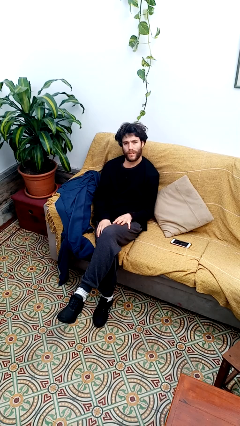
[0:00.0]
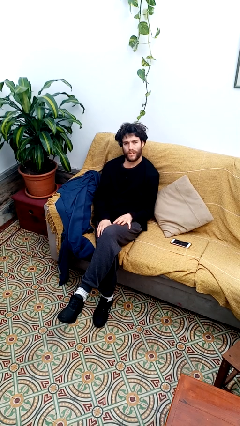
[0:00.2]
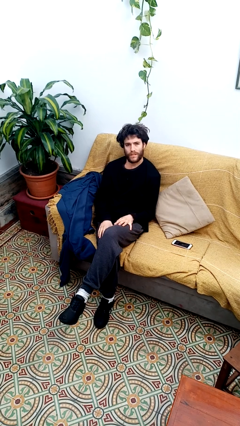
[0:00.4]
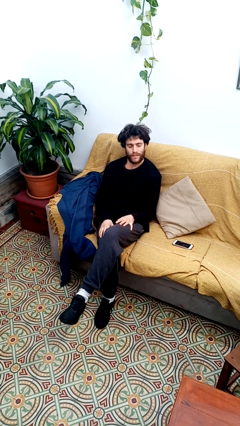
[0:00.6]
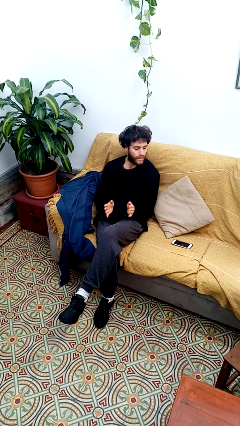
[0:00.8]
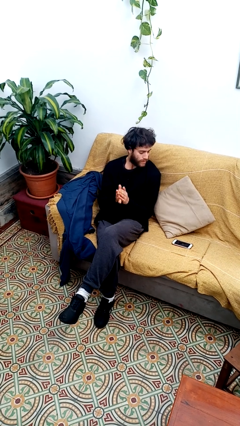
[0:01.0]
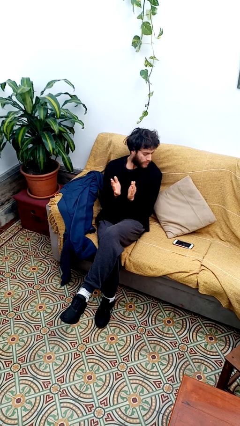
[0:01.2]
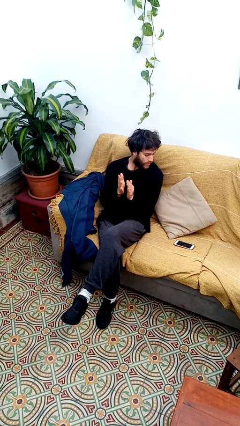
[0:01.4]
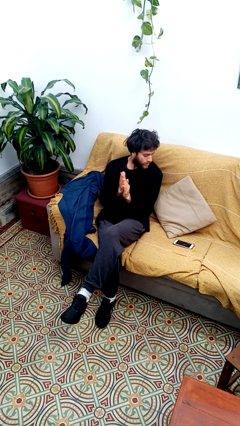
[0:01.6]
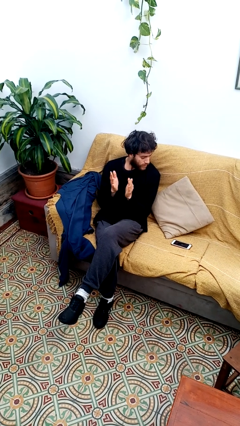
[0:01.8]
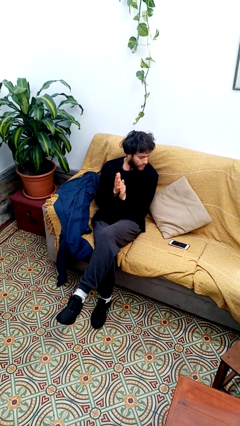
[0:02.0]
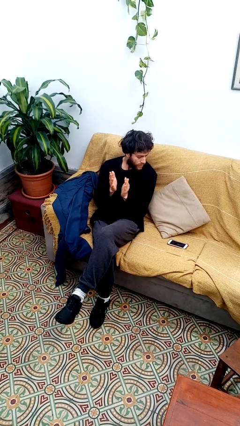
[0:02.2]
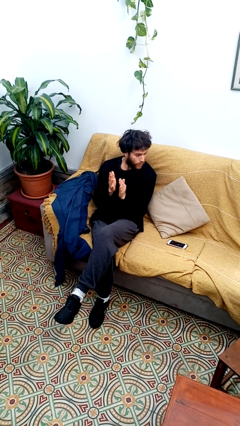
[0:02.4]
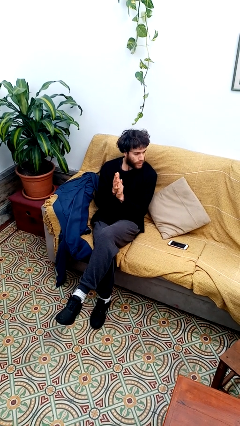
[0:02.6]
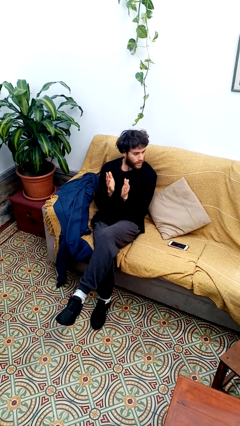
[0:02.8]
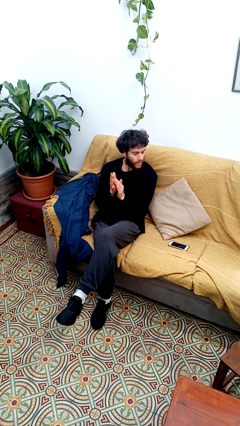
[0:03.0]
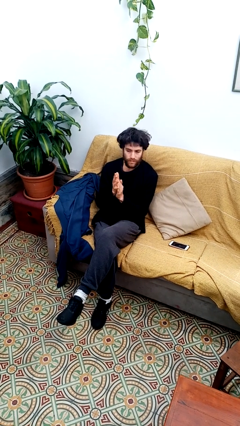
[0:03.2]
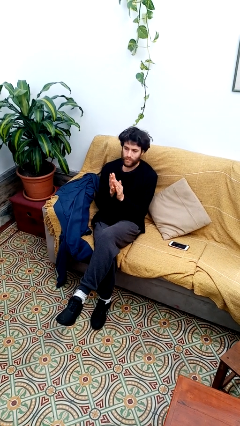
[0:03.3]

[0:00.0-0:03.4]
person claps hands

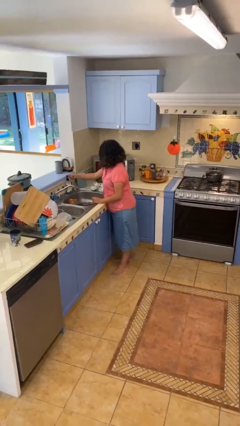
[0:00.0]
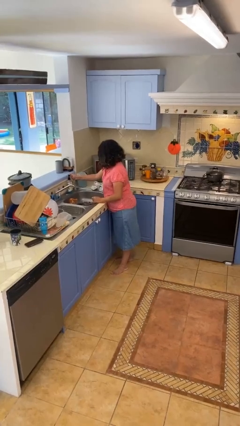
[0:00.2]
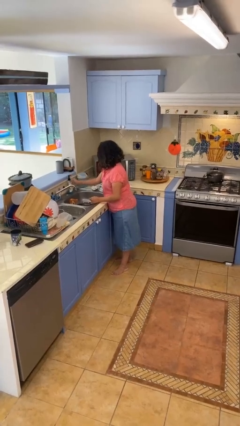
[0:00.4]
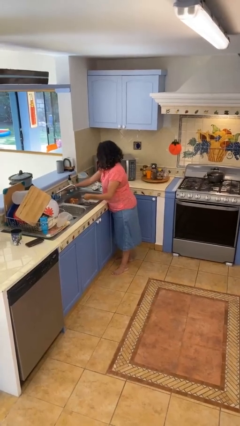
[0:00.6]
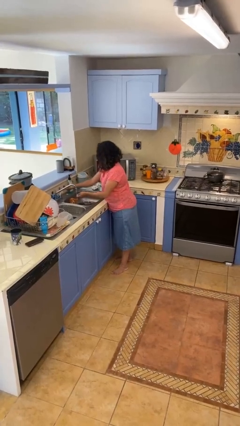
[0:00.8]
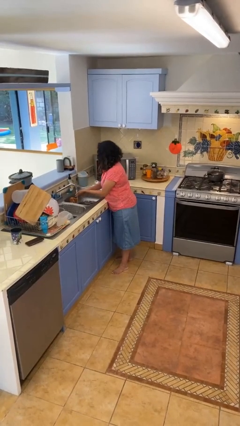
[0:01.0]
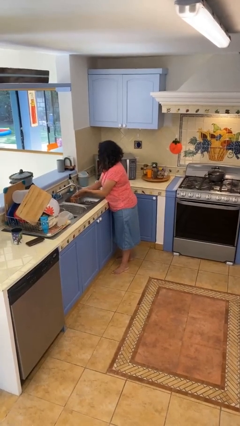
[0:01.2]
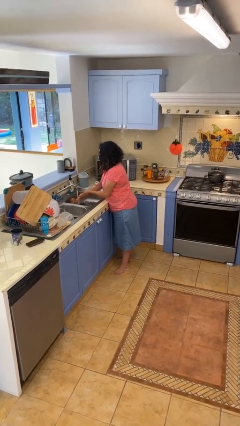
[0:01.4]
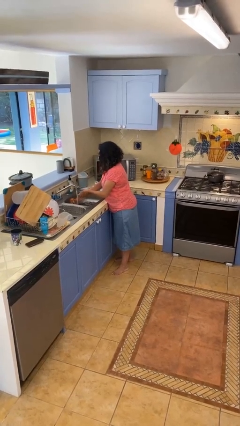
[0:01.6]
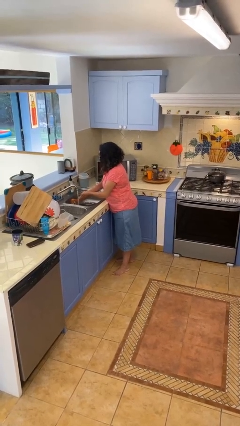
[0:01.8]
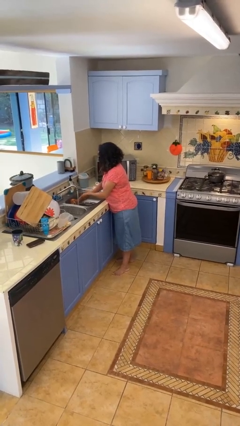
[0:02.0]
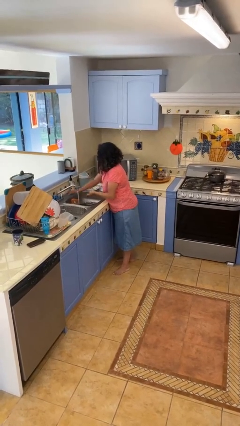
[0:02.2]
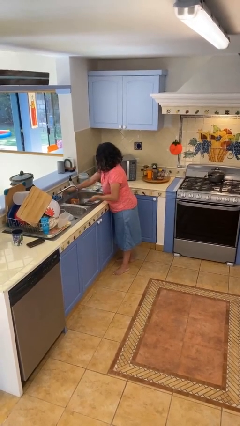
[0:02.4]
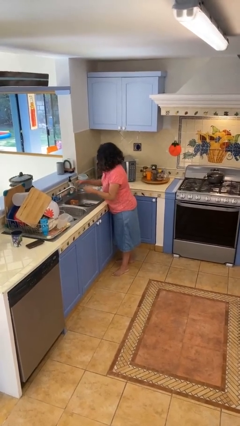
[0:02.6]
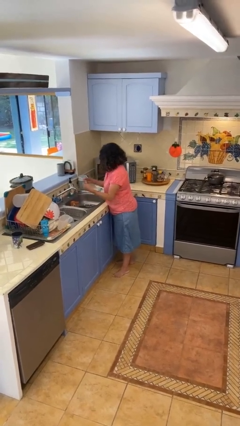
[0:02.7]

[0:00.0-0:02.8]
person washes hands

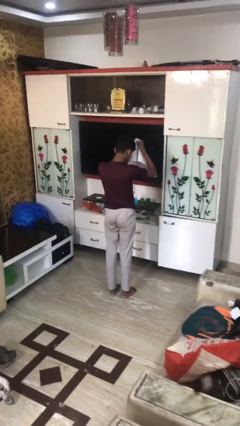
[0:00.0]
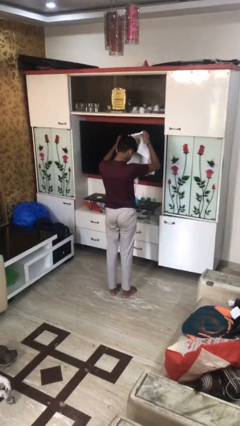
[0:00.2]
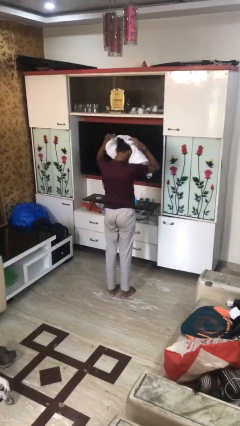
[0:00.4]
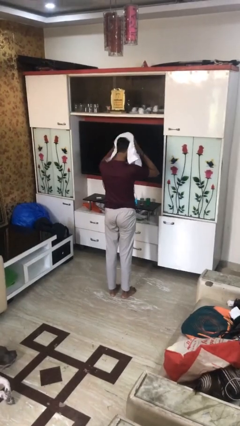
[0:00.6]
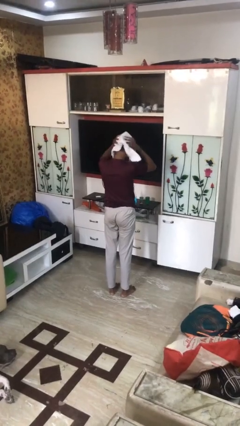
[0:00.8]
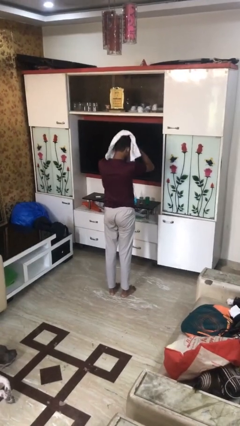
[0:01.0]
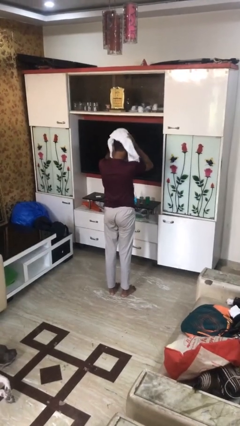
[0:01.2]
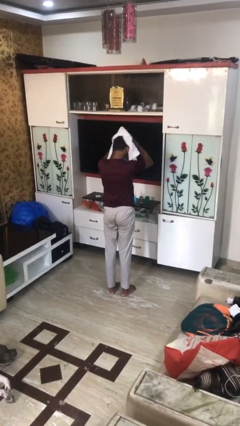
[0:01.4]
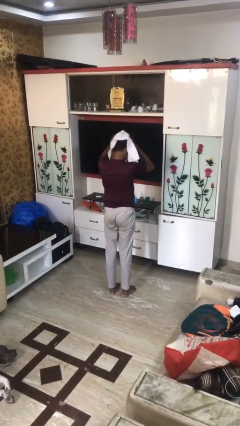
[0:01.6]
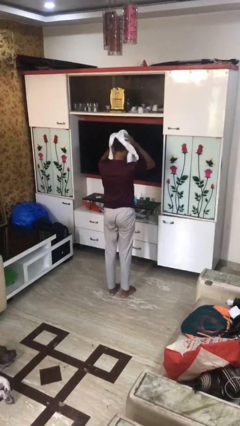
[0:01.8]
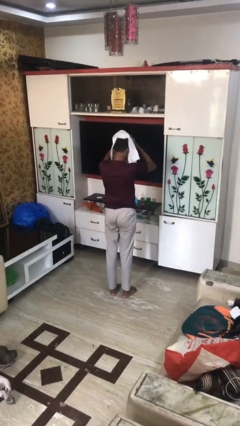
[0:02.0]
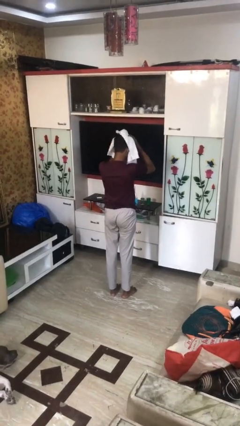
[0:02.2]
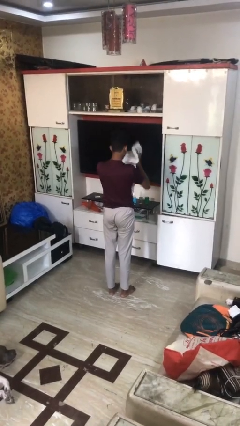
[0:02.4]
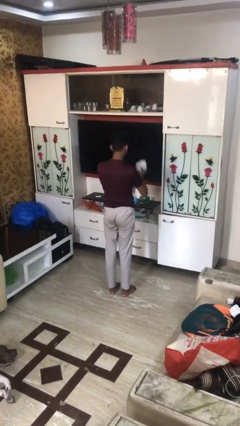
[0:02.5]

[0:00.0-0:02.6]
person dries hair with towel

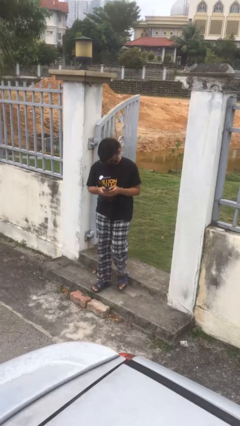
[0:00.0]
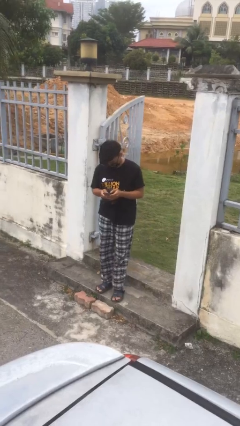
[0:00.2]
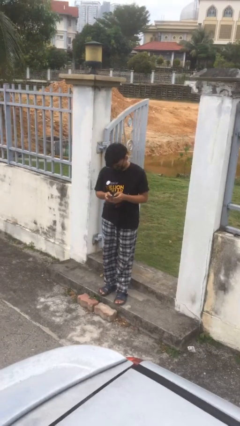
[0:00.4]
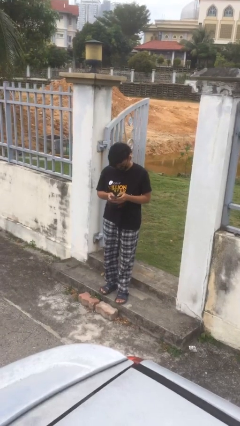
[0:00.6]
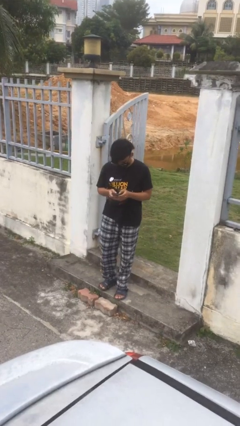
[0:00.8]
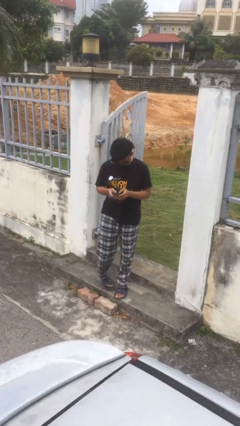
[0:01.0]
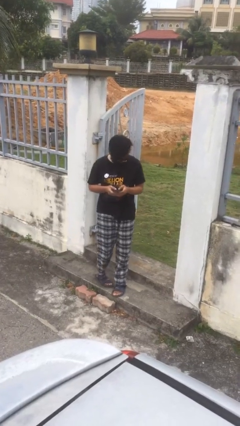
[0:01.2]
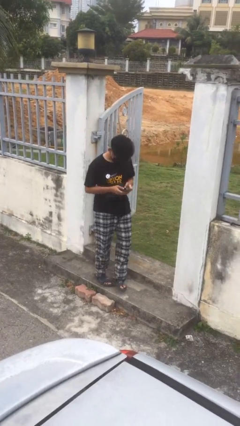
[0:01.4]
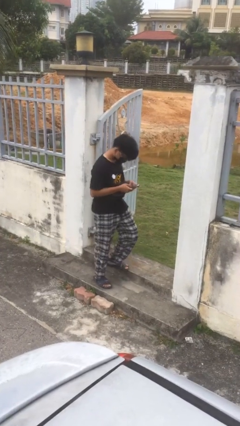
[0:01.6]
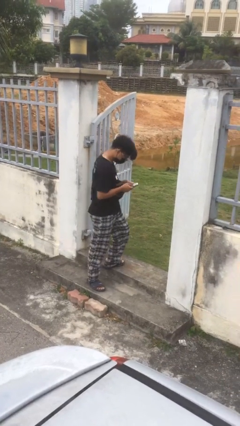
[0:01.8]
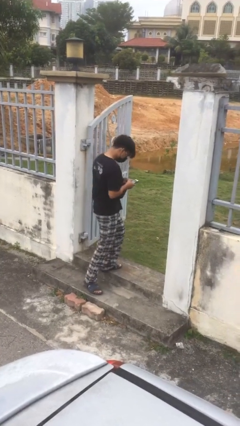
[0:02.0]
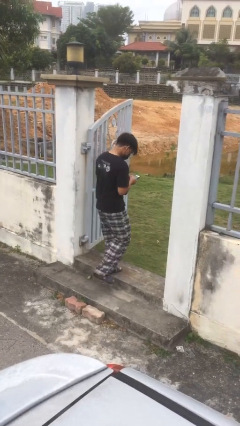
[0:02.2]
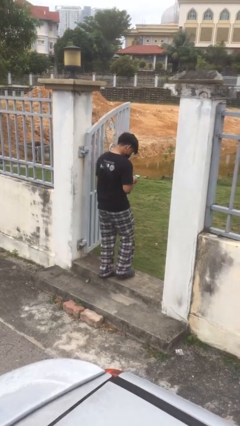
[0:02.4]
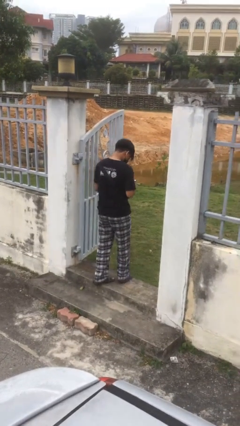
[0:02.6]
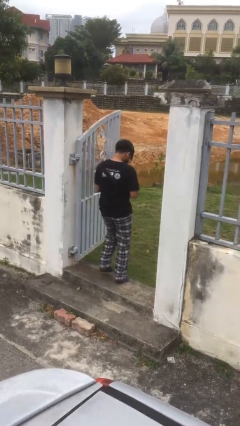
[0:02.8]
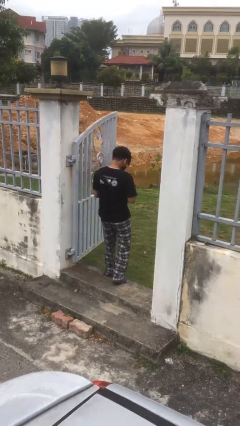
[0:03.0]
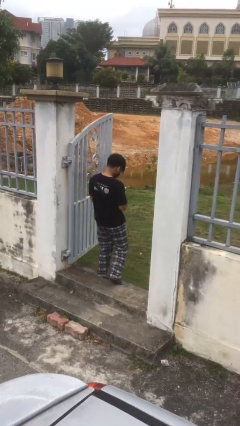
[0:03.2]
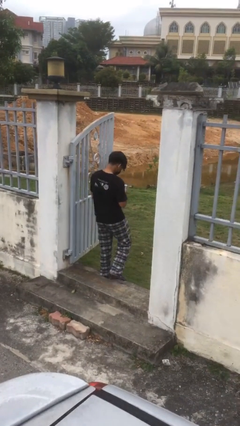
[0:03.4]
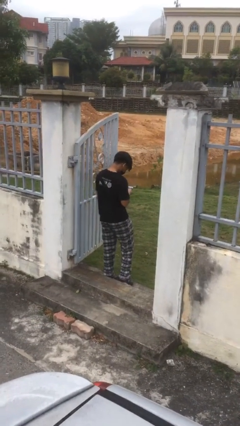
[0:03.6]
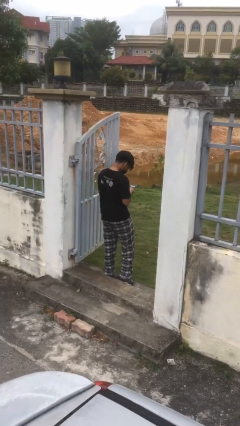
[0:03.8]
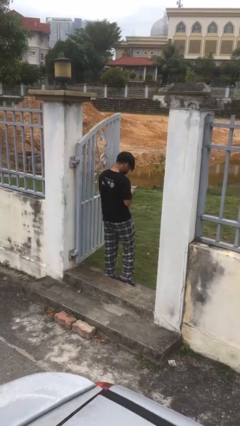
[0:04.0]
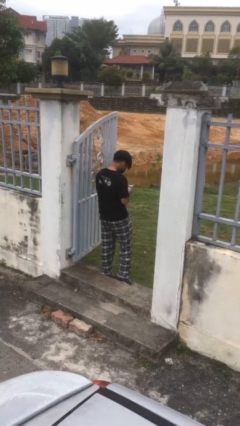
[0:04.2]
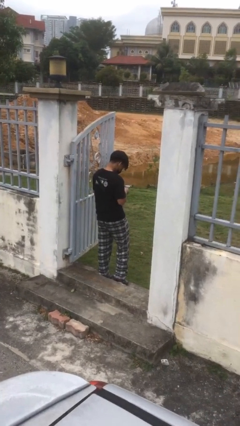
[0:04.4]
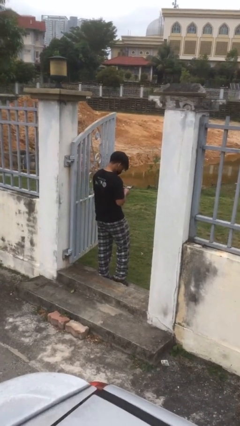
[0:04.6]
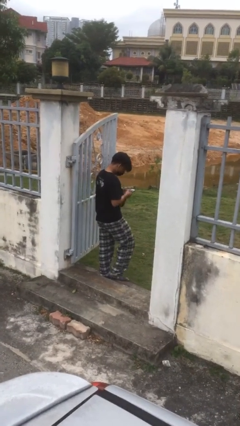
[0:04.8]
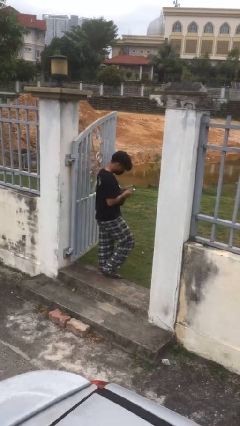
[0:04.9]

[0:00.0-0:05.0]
person exits scene through structure

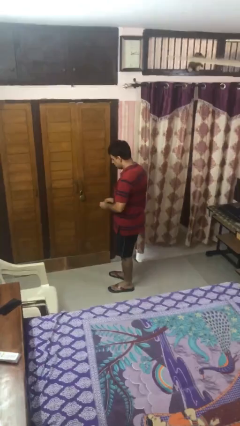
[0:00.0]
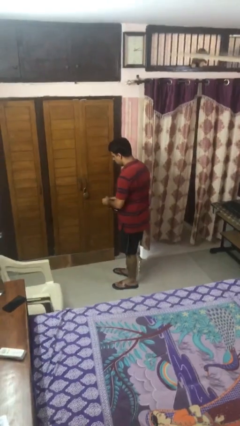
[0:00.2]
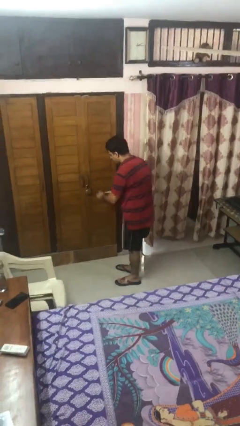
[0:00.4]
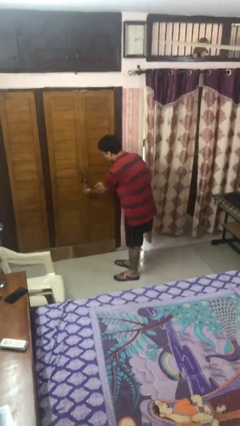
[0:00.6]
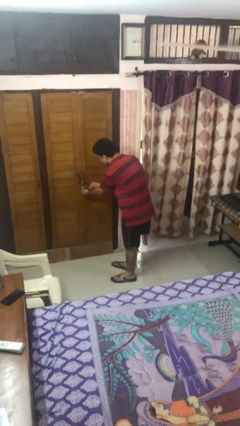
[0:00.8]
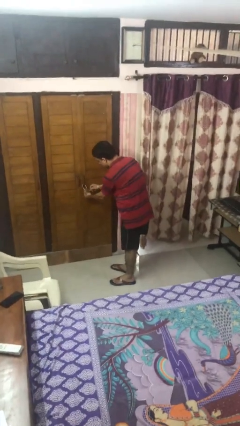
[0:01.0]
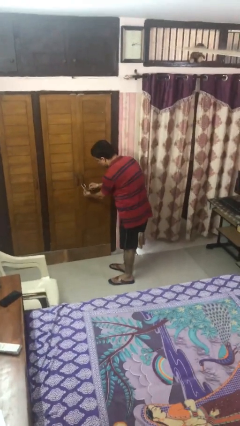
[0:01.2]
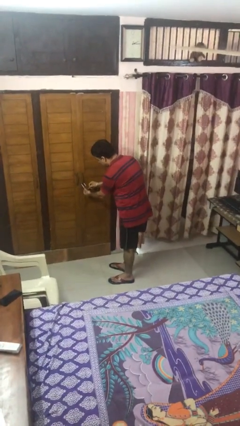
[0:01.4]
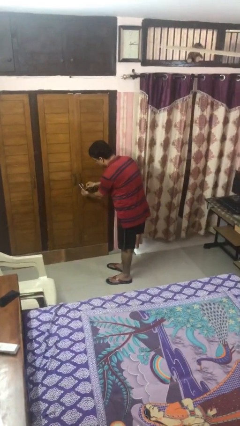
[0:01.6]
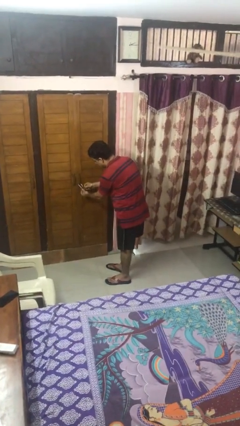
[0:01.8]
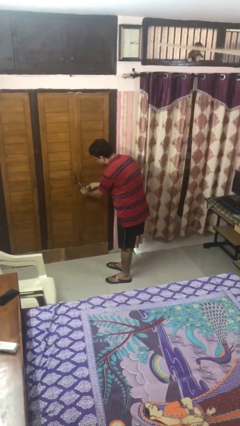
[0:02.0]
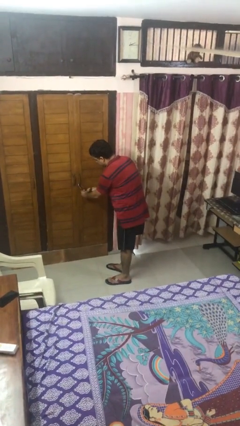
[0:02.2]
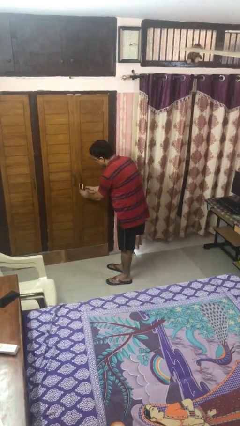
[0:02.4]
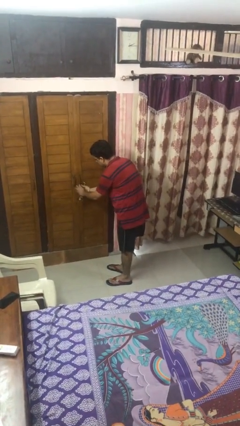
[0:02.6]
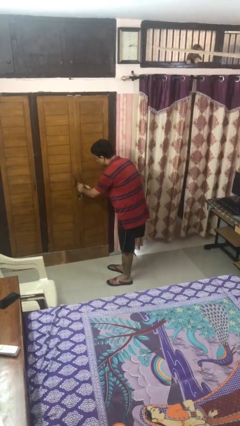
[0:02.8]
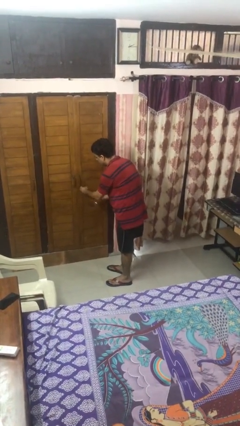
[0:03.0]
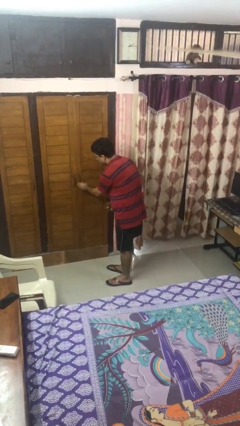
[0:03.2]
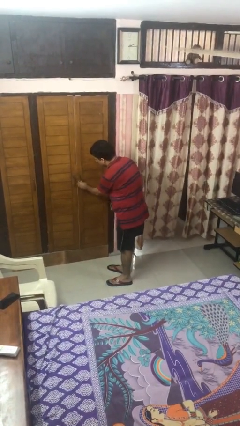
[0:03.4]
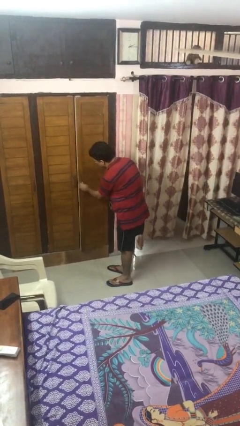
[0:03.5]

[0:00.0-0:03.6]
person unlocks door with keys

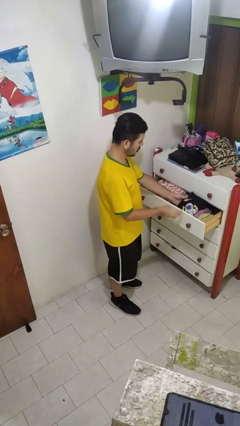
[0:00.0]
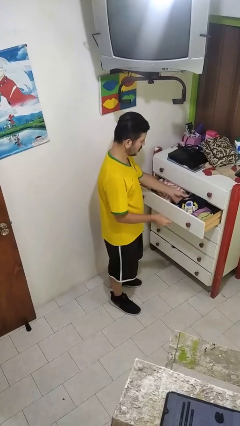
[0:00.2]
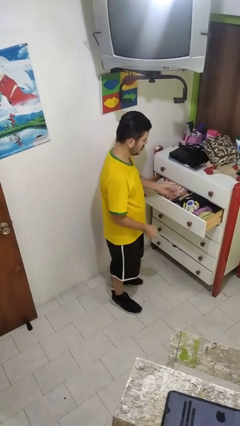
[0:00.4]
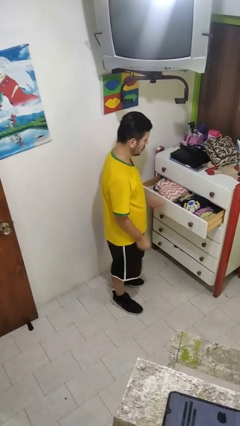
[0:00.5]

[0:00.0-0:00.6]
person puts clothes into dresser
